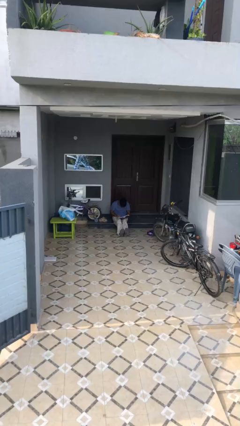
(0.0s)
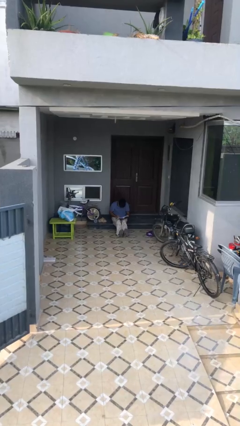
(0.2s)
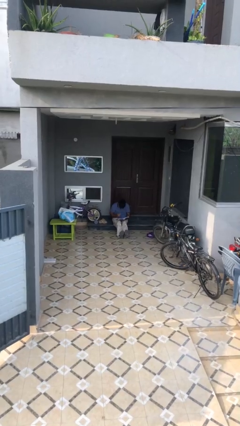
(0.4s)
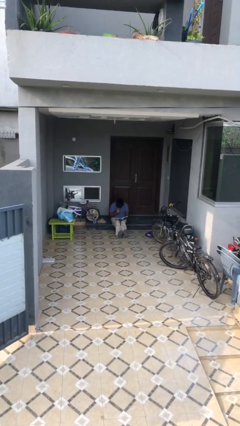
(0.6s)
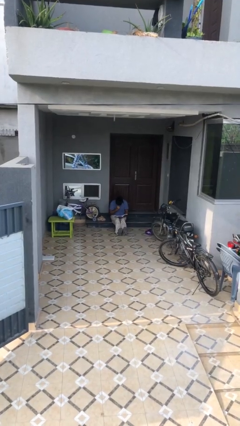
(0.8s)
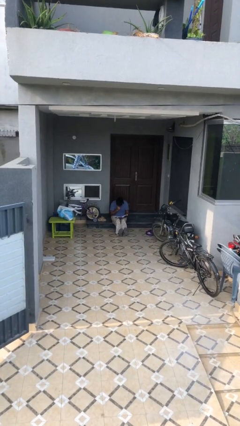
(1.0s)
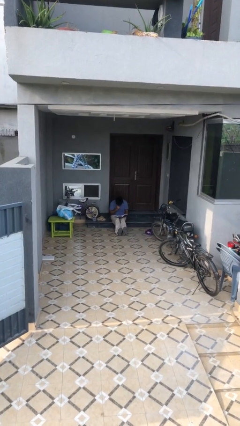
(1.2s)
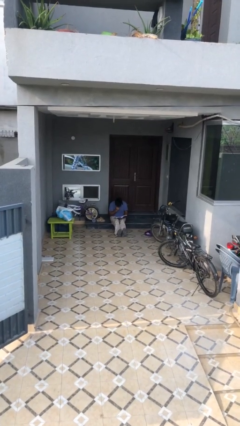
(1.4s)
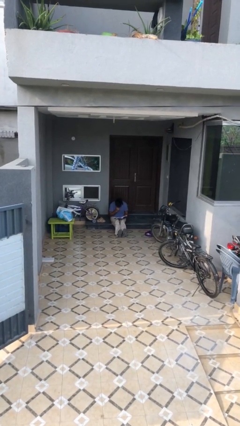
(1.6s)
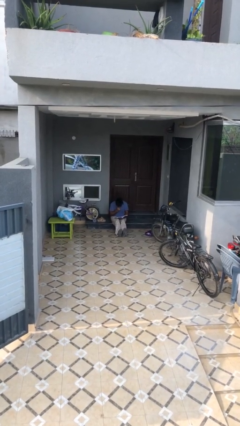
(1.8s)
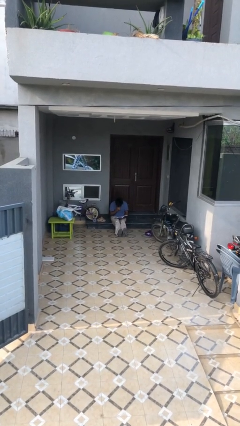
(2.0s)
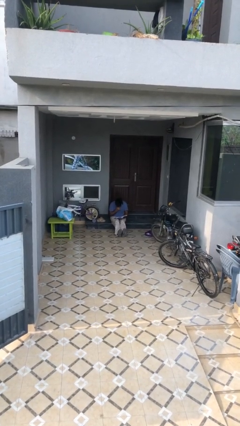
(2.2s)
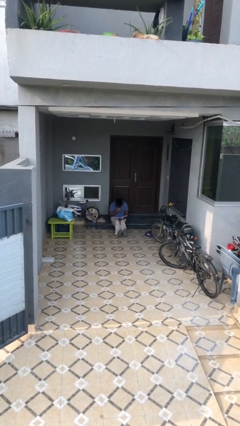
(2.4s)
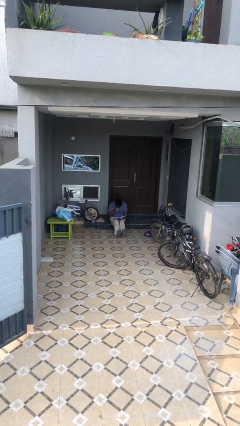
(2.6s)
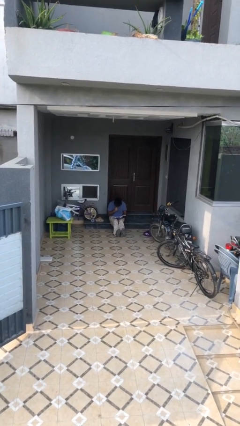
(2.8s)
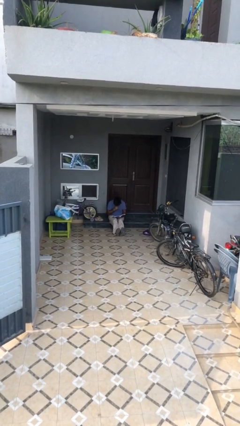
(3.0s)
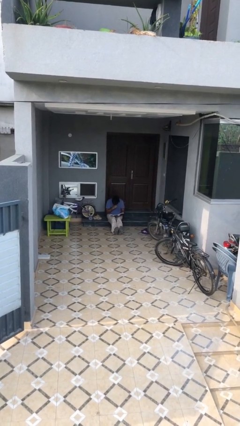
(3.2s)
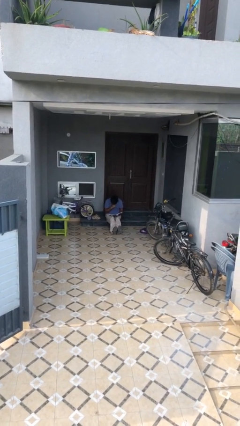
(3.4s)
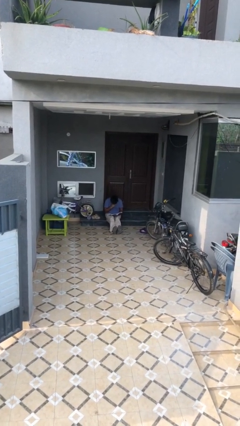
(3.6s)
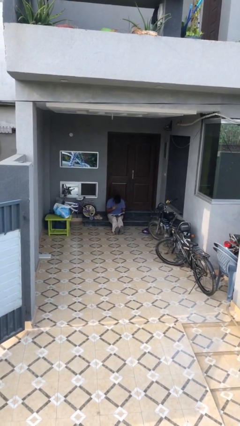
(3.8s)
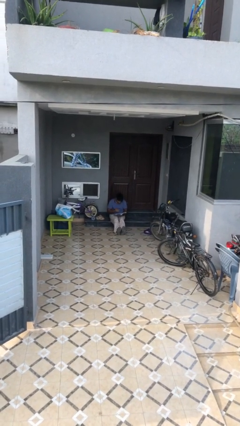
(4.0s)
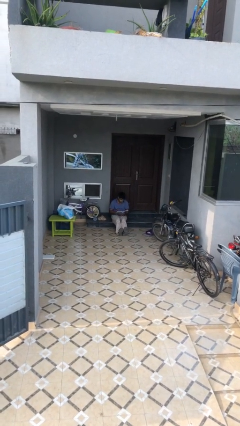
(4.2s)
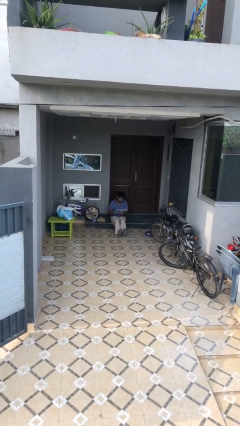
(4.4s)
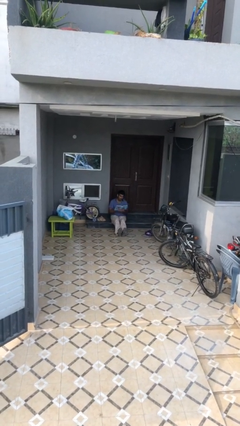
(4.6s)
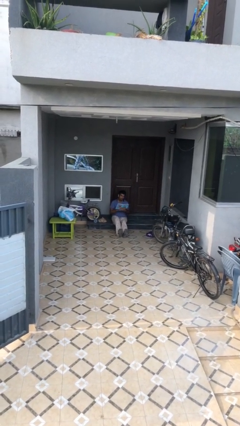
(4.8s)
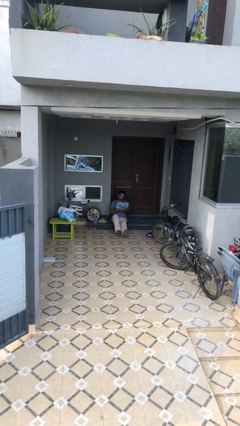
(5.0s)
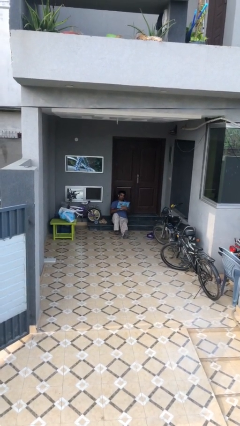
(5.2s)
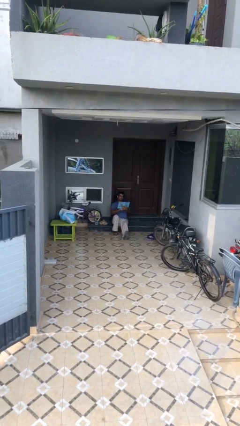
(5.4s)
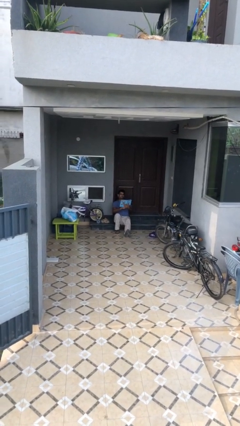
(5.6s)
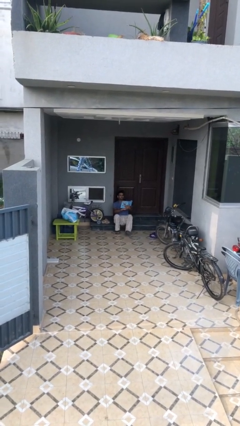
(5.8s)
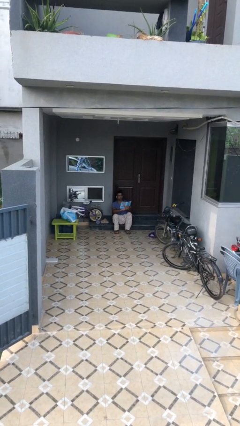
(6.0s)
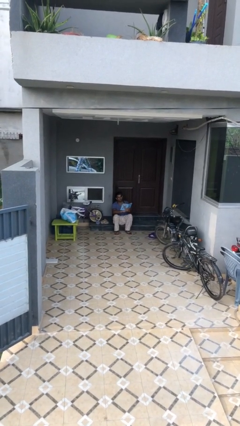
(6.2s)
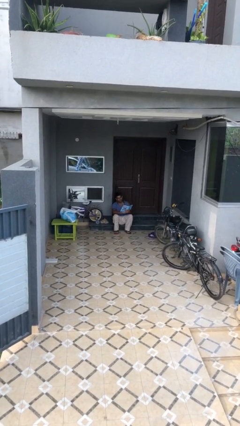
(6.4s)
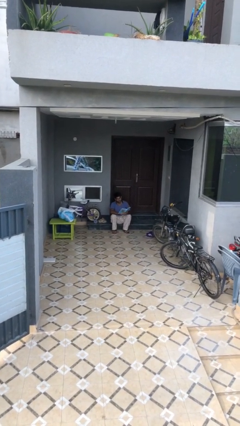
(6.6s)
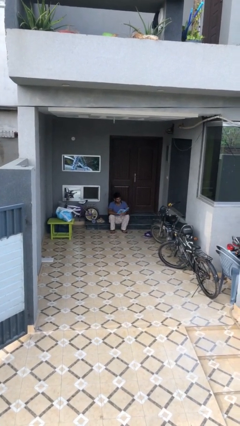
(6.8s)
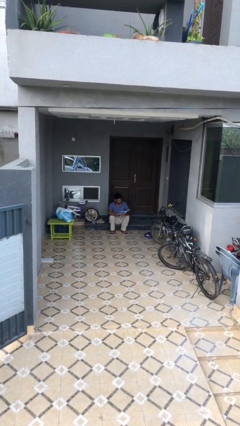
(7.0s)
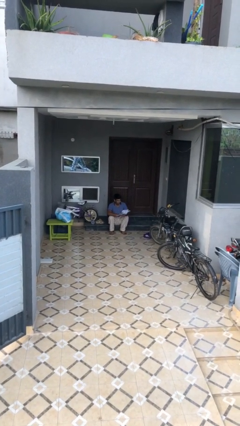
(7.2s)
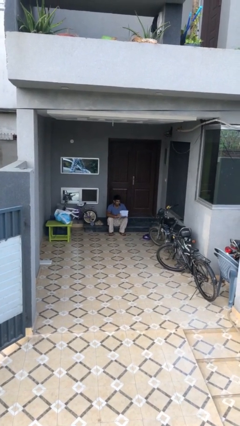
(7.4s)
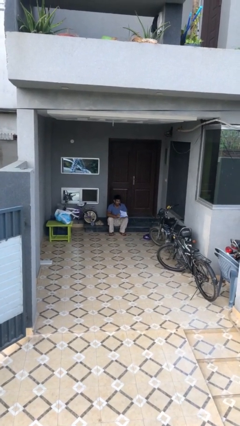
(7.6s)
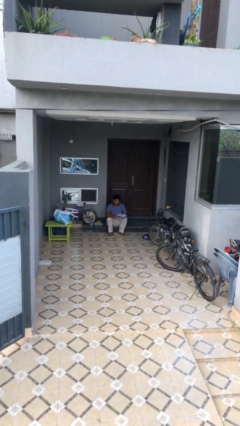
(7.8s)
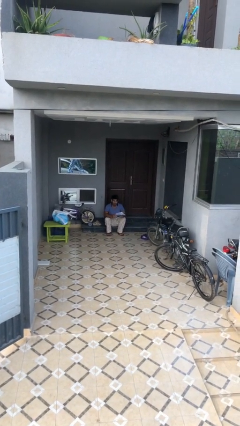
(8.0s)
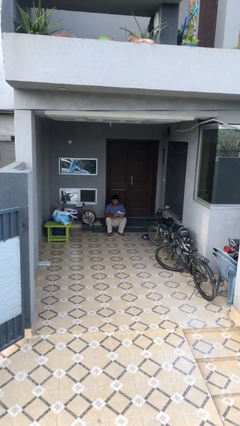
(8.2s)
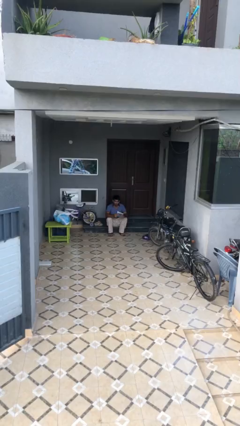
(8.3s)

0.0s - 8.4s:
person reads document

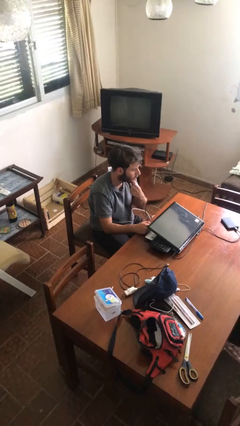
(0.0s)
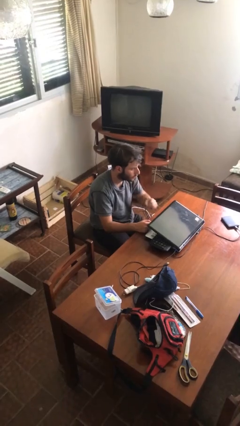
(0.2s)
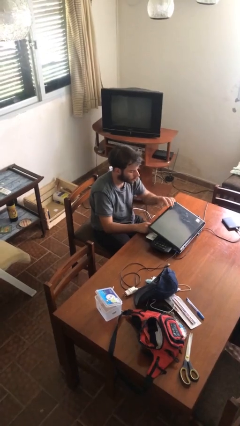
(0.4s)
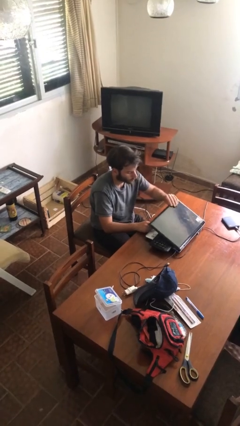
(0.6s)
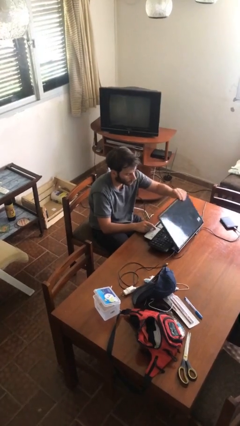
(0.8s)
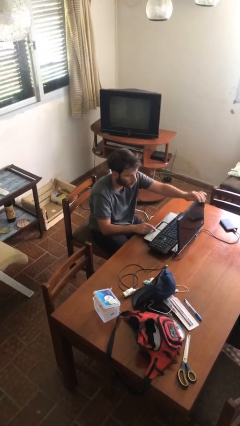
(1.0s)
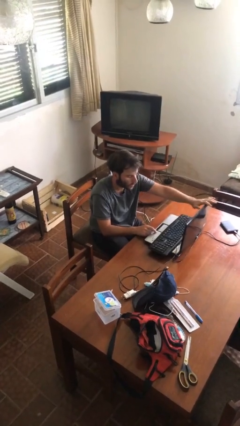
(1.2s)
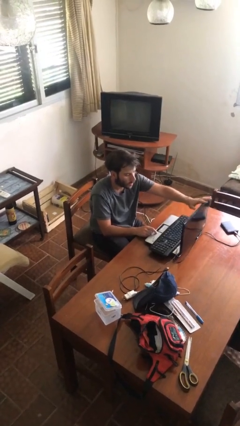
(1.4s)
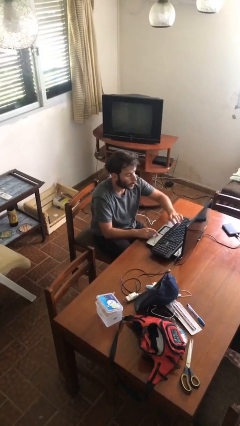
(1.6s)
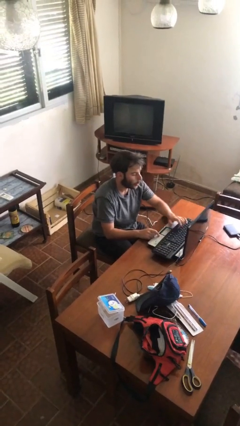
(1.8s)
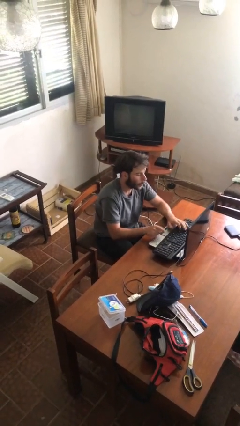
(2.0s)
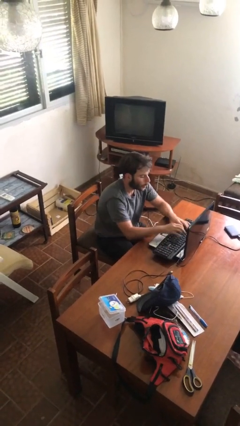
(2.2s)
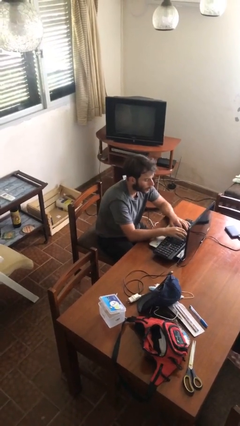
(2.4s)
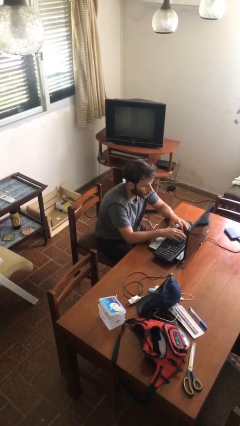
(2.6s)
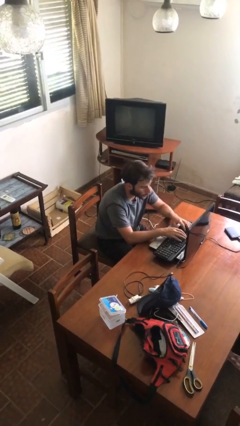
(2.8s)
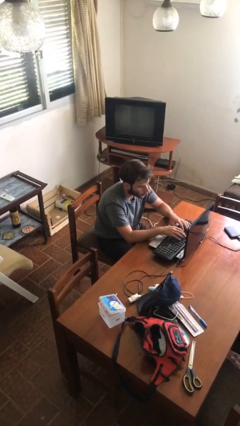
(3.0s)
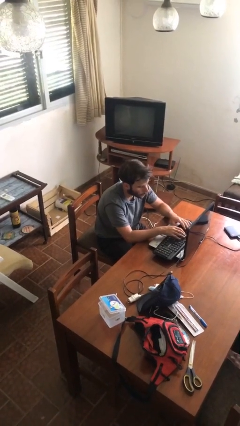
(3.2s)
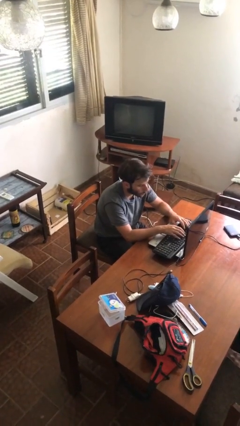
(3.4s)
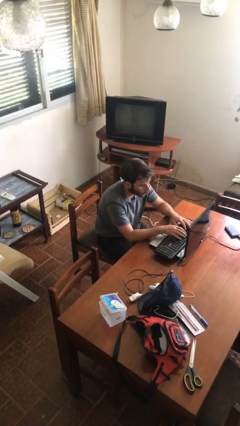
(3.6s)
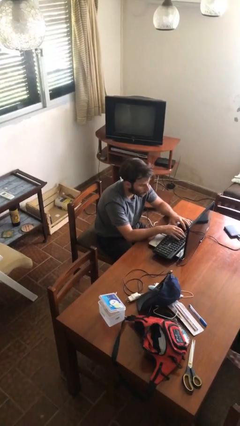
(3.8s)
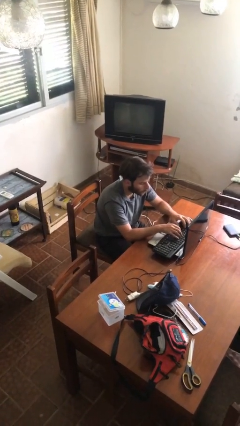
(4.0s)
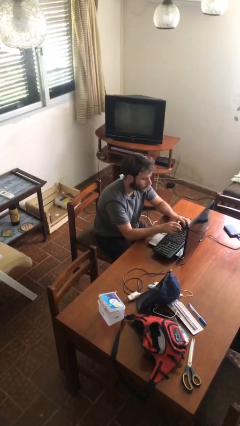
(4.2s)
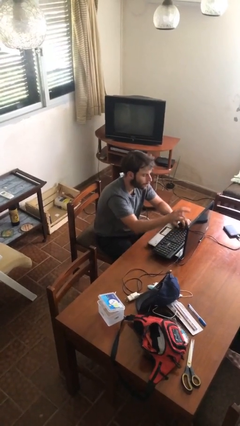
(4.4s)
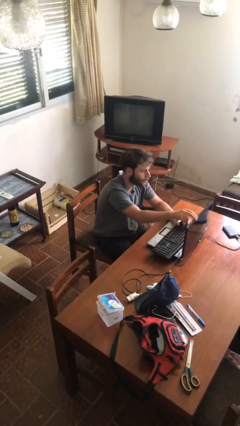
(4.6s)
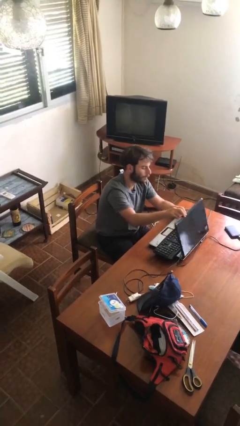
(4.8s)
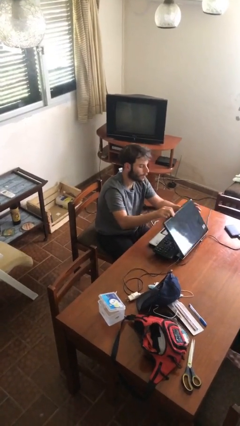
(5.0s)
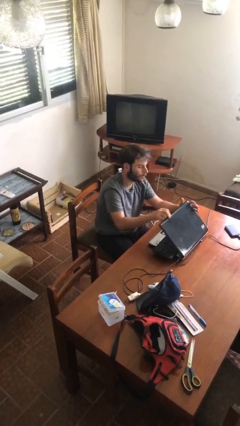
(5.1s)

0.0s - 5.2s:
person interacts with laptop

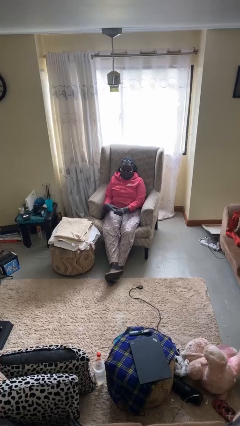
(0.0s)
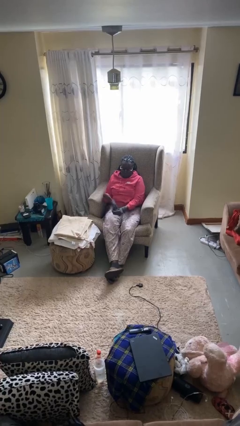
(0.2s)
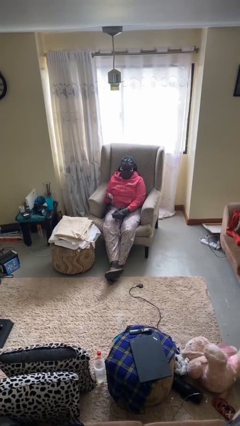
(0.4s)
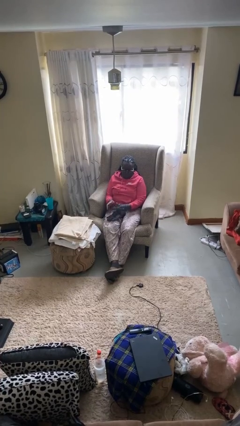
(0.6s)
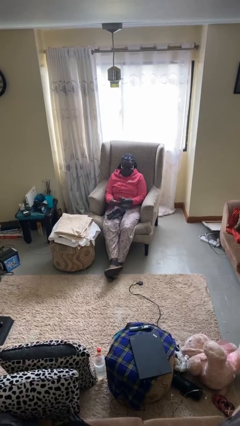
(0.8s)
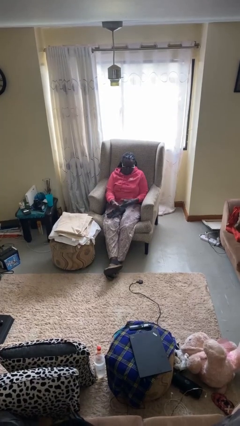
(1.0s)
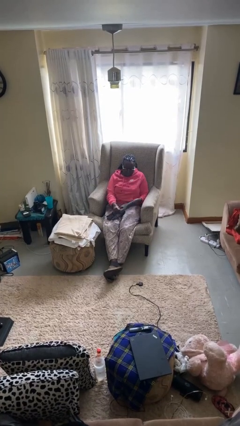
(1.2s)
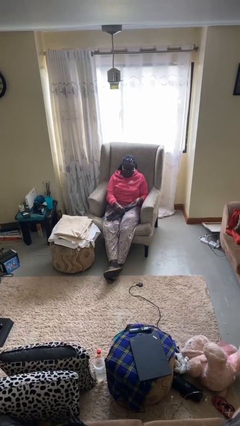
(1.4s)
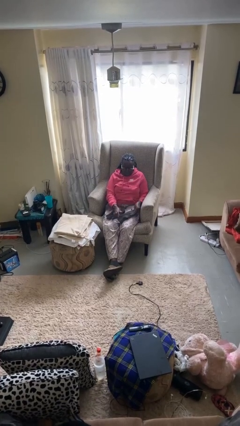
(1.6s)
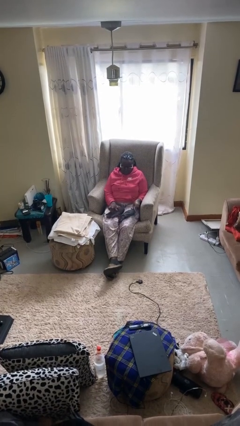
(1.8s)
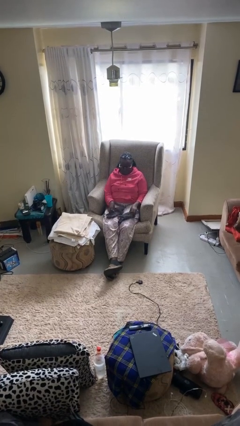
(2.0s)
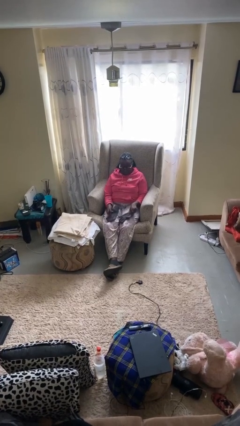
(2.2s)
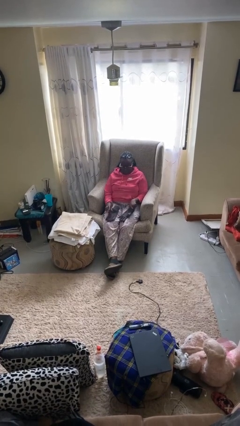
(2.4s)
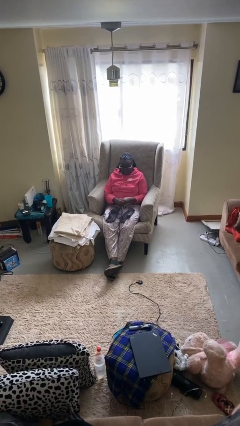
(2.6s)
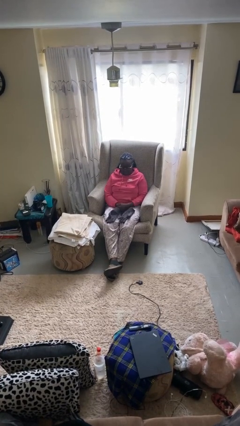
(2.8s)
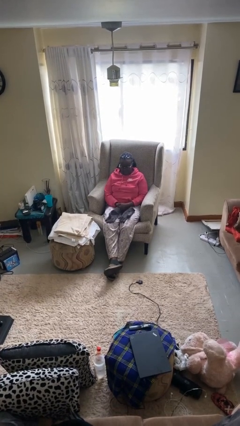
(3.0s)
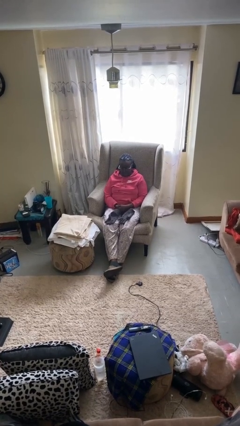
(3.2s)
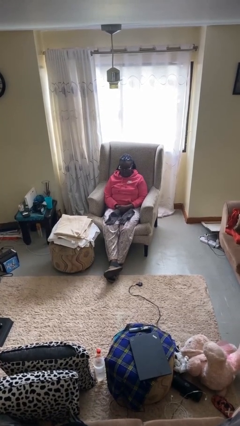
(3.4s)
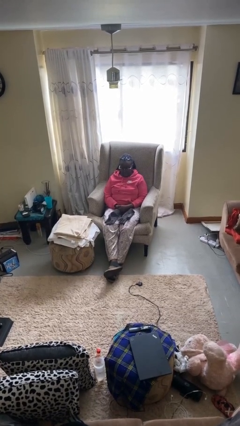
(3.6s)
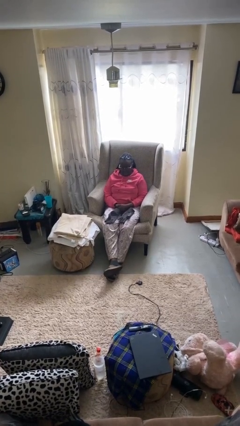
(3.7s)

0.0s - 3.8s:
person takes off gloves

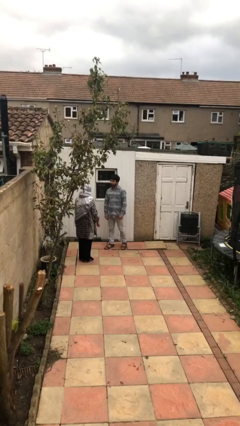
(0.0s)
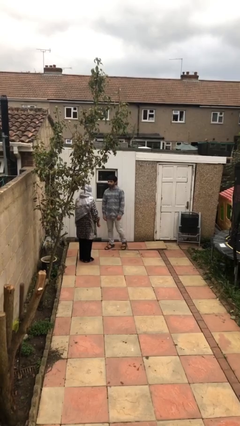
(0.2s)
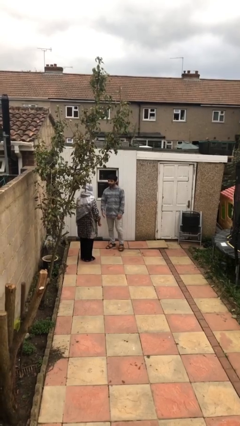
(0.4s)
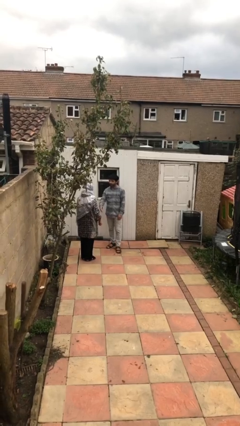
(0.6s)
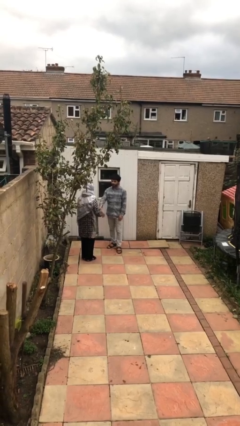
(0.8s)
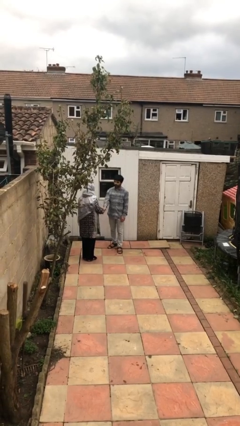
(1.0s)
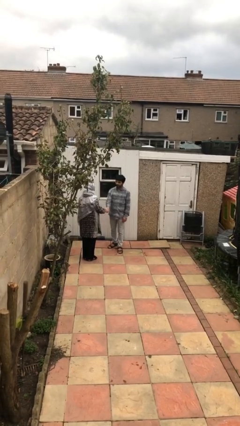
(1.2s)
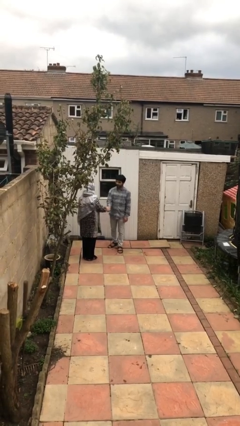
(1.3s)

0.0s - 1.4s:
person shakes hand
